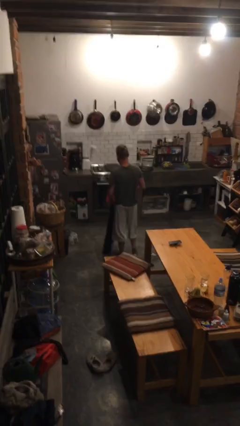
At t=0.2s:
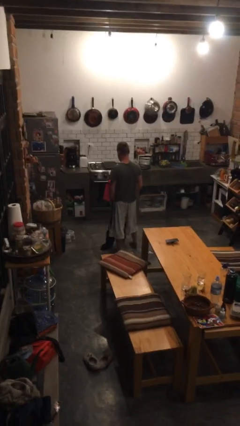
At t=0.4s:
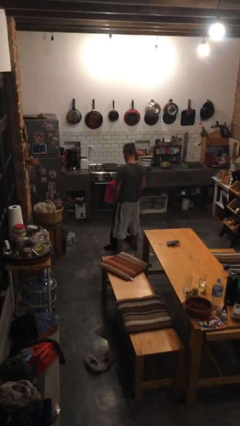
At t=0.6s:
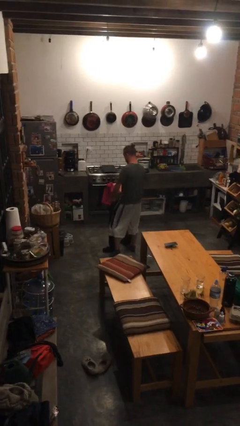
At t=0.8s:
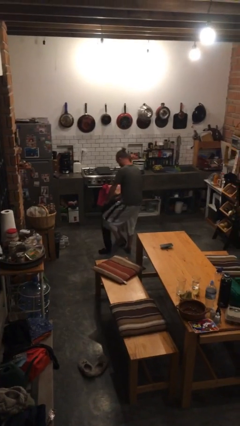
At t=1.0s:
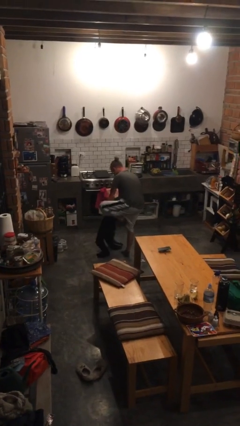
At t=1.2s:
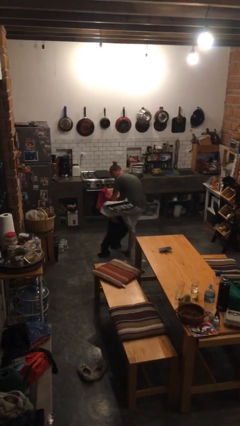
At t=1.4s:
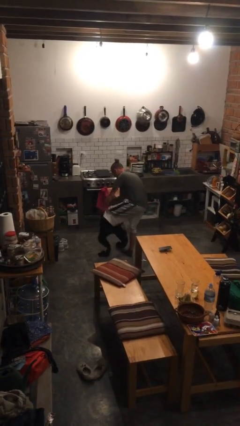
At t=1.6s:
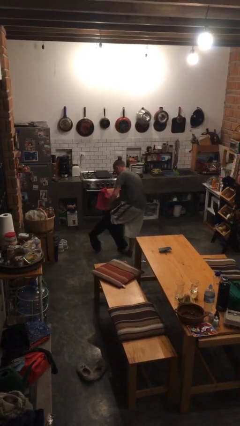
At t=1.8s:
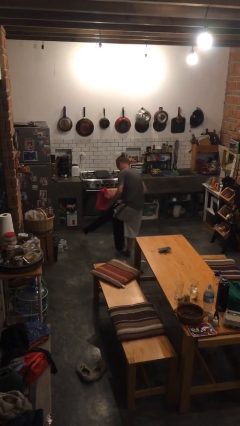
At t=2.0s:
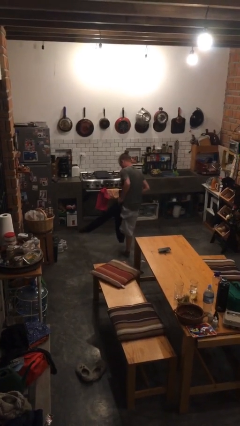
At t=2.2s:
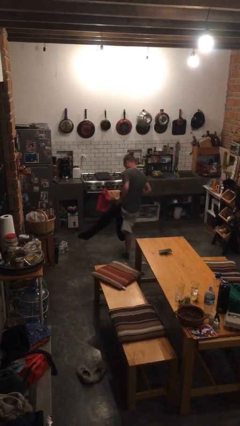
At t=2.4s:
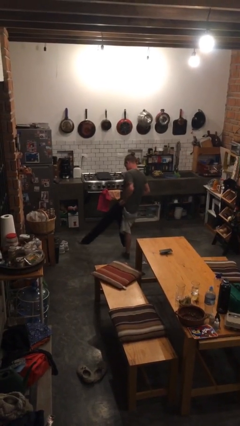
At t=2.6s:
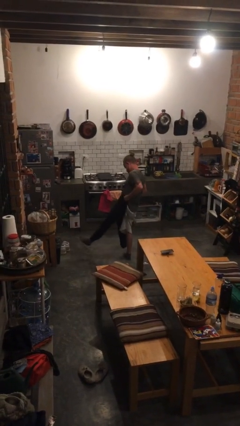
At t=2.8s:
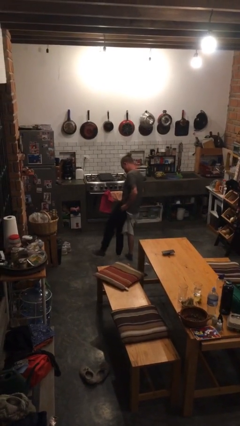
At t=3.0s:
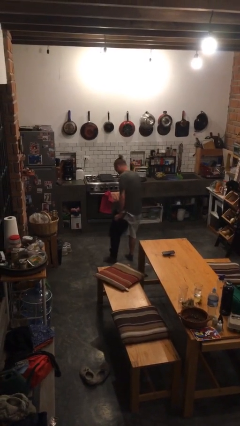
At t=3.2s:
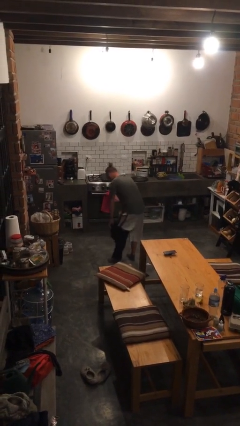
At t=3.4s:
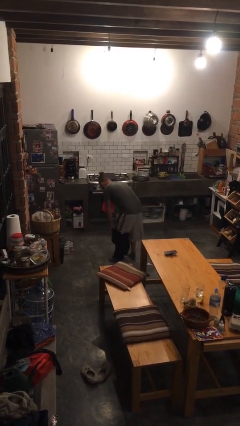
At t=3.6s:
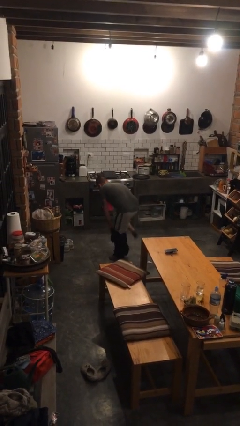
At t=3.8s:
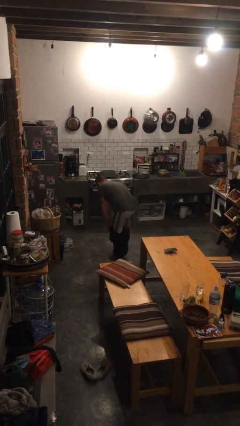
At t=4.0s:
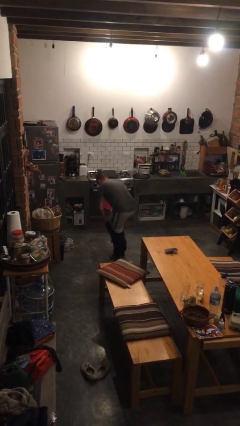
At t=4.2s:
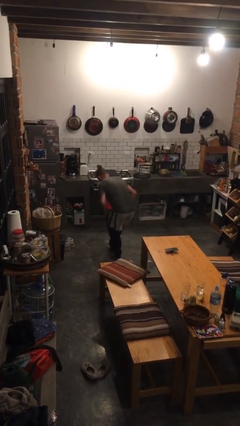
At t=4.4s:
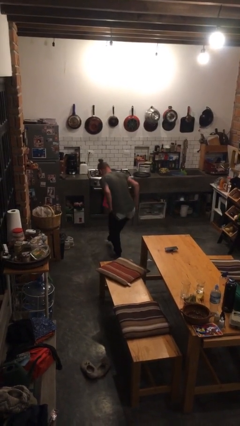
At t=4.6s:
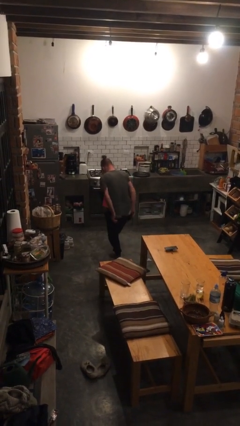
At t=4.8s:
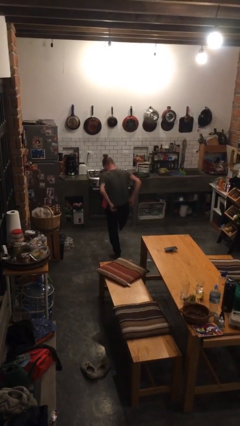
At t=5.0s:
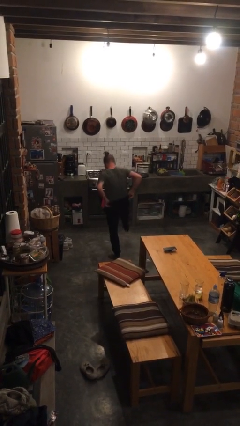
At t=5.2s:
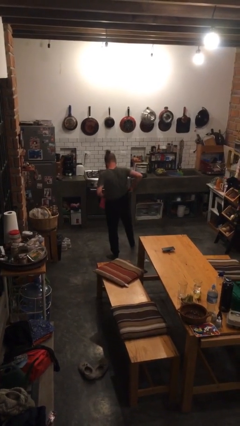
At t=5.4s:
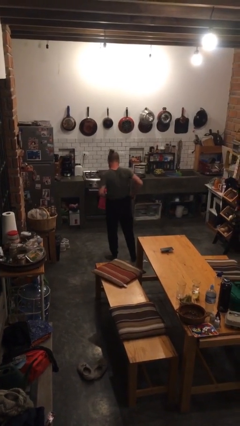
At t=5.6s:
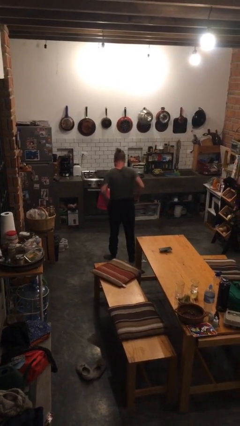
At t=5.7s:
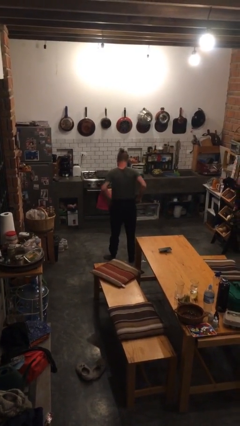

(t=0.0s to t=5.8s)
person puts on pants

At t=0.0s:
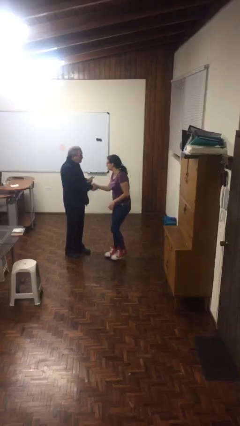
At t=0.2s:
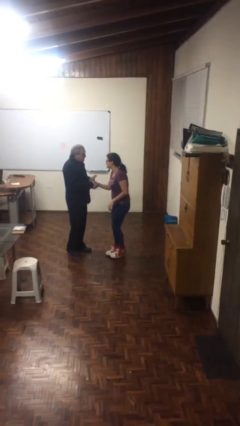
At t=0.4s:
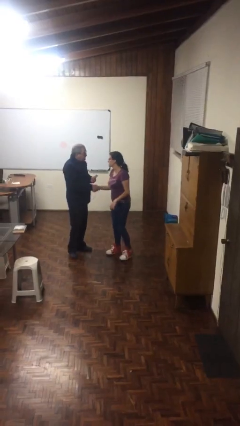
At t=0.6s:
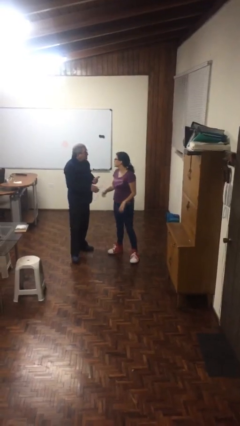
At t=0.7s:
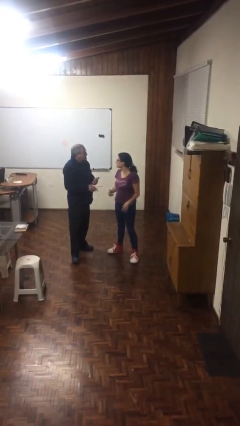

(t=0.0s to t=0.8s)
person shakes hand

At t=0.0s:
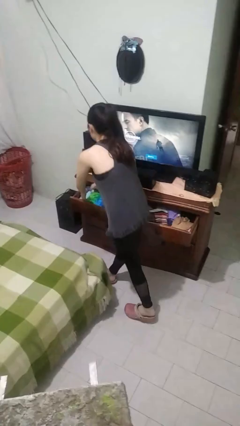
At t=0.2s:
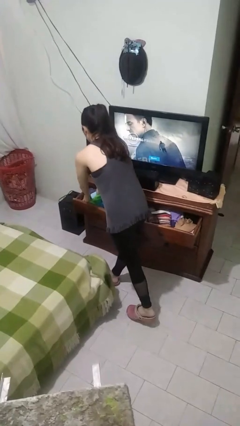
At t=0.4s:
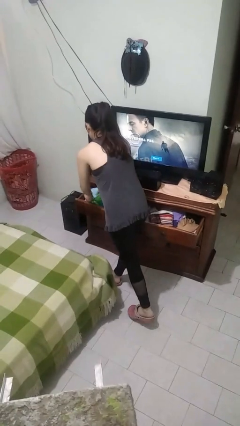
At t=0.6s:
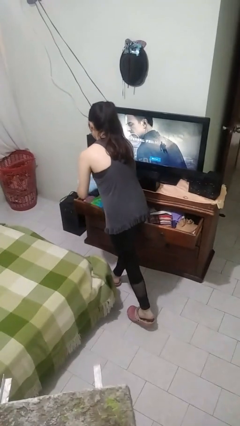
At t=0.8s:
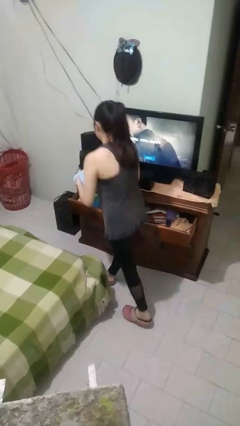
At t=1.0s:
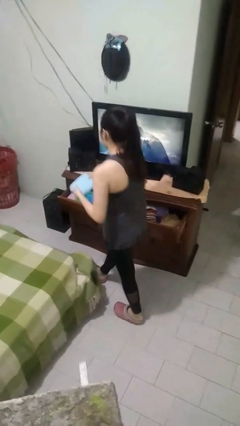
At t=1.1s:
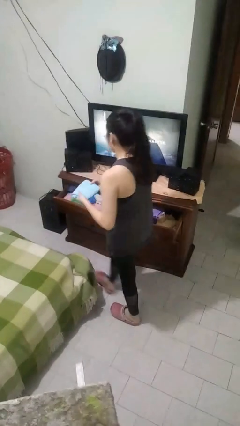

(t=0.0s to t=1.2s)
person takes clothes from dresser

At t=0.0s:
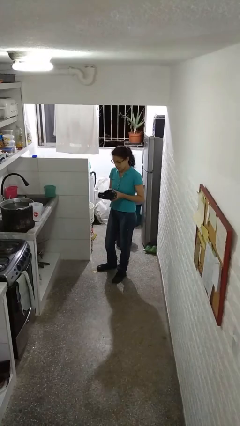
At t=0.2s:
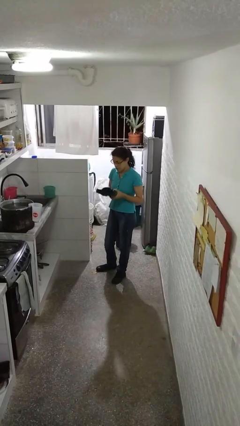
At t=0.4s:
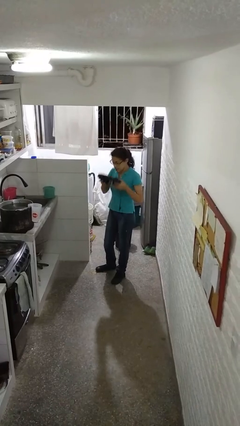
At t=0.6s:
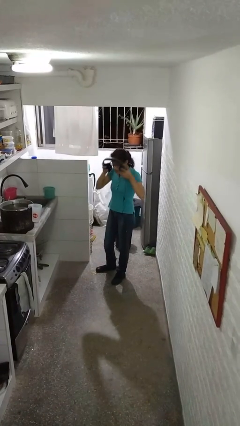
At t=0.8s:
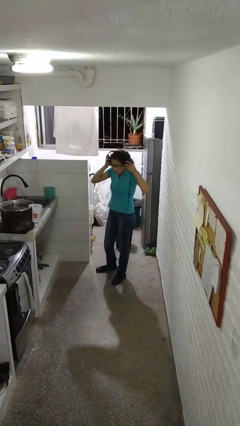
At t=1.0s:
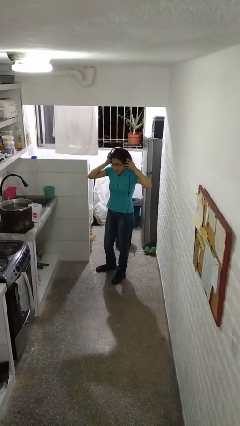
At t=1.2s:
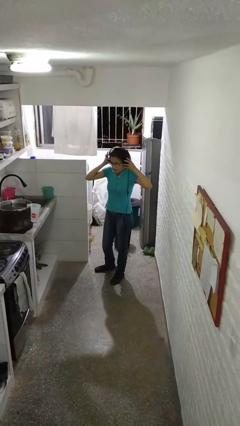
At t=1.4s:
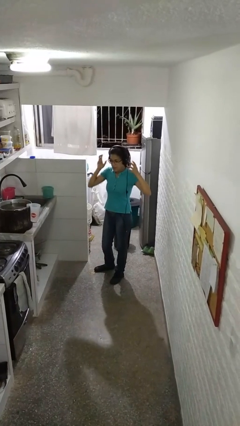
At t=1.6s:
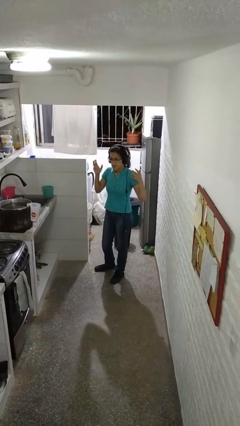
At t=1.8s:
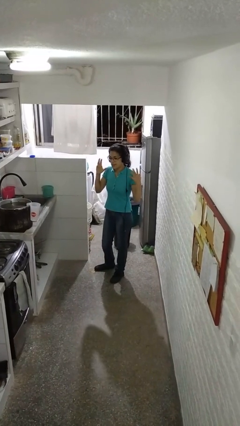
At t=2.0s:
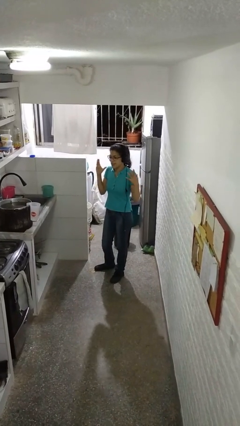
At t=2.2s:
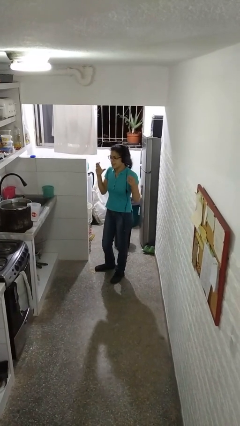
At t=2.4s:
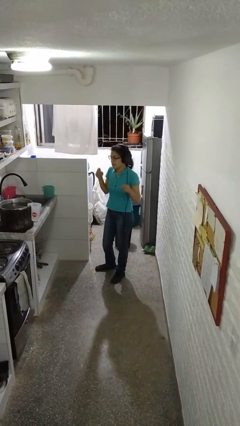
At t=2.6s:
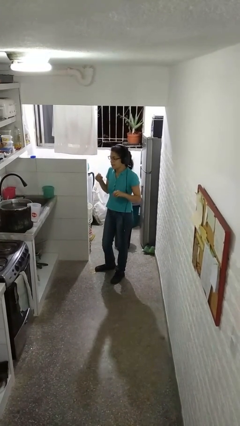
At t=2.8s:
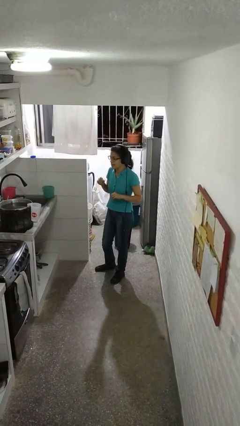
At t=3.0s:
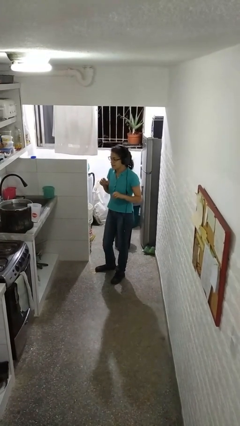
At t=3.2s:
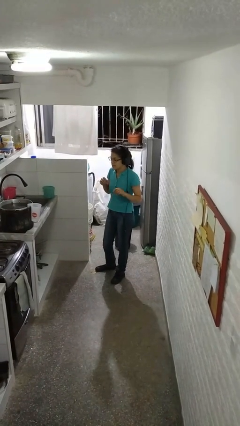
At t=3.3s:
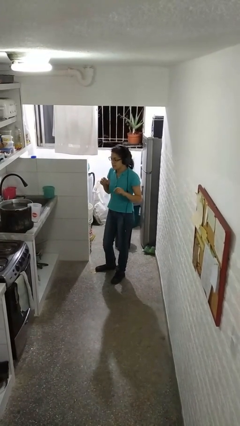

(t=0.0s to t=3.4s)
person puts on headphones

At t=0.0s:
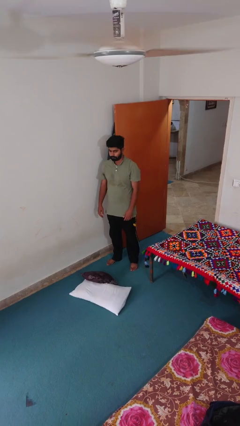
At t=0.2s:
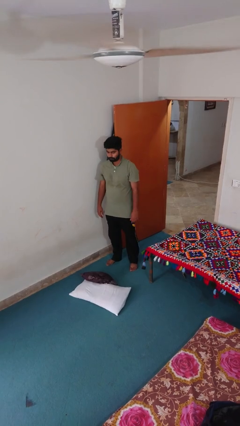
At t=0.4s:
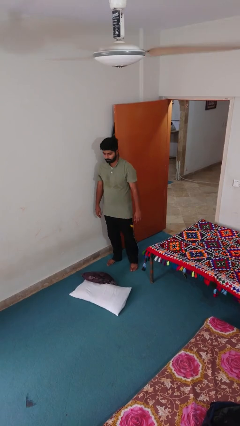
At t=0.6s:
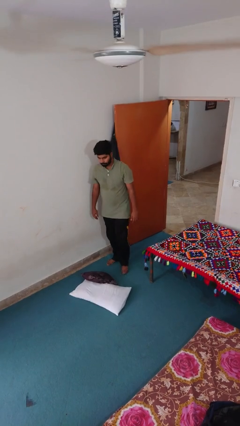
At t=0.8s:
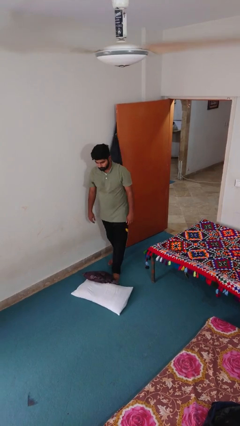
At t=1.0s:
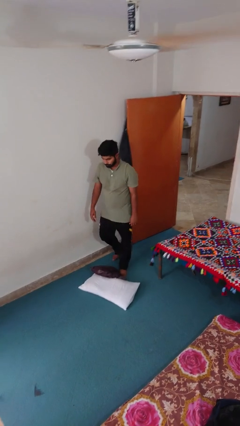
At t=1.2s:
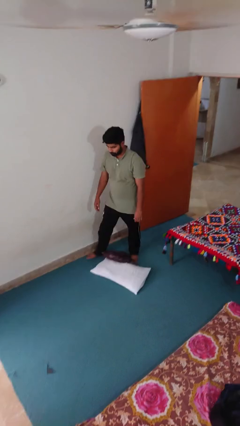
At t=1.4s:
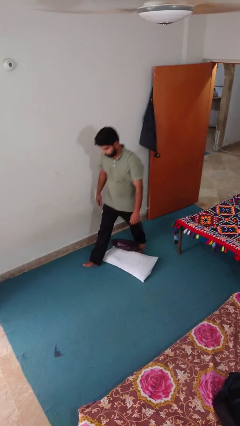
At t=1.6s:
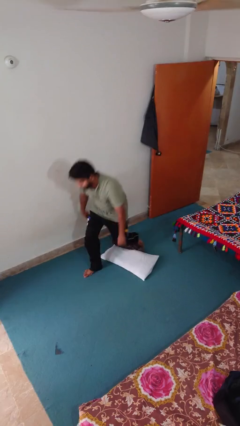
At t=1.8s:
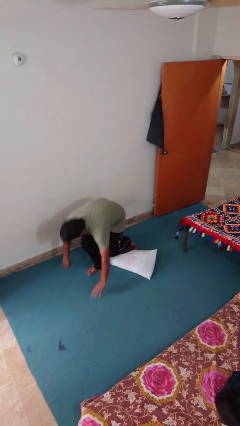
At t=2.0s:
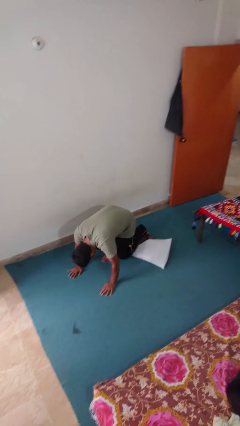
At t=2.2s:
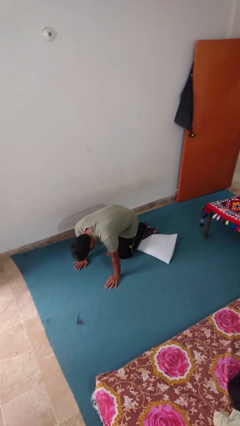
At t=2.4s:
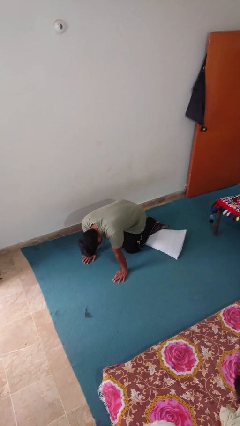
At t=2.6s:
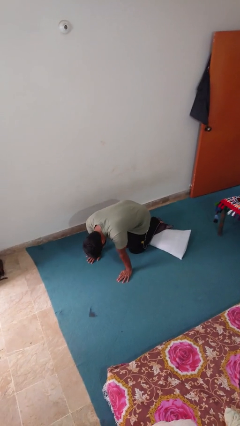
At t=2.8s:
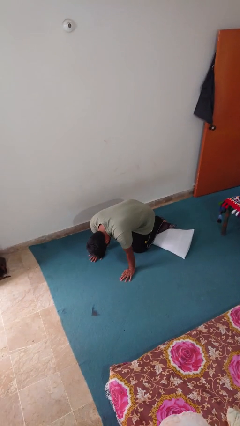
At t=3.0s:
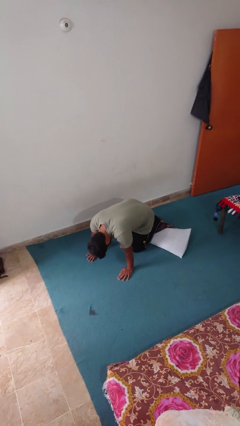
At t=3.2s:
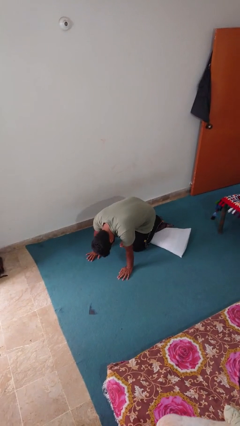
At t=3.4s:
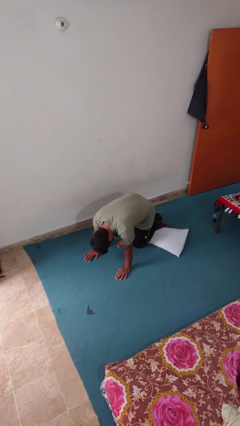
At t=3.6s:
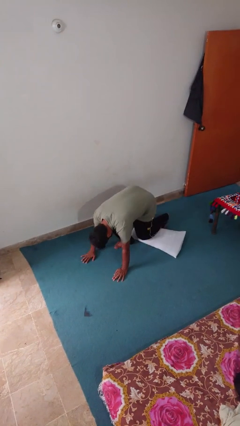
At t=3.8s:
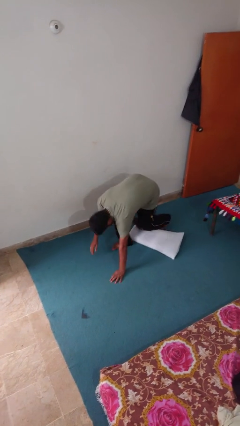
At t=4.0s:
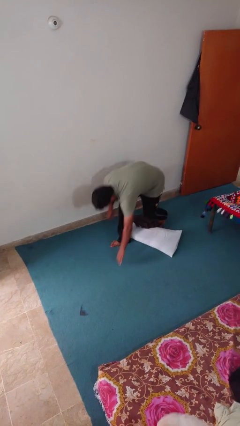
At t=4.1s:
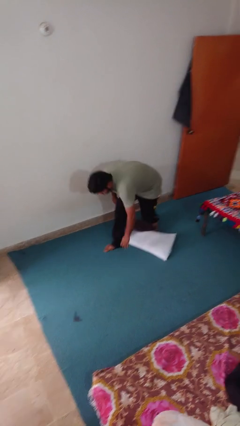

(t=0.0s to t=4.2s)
person trips on object on floor

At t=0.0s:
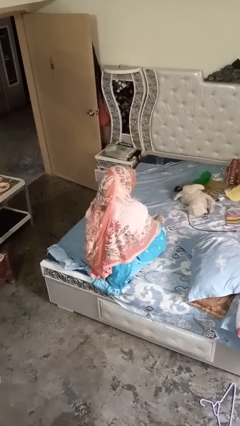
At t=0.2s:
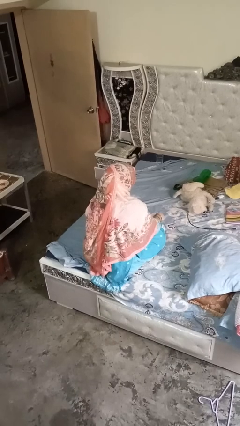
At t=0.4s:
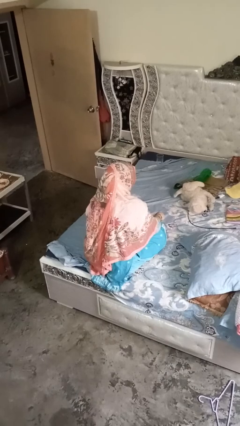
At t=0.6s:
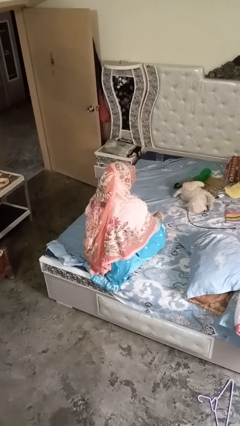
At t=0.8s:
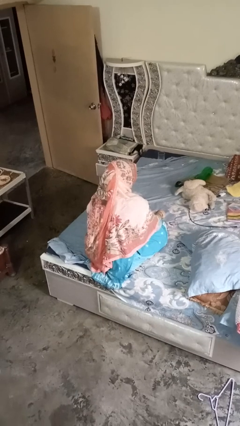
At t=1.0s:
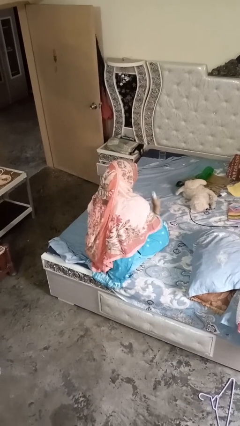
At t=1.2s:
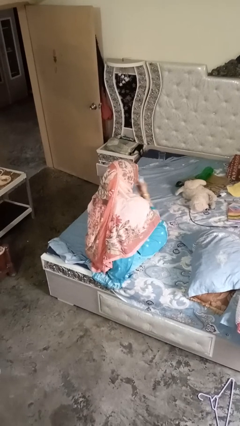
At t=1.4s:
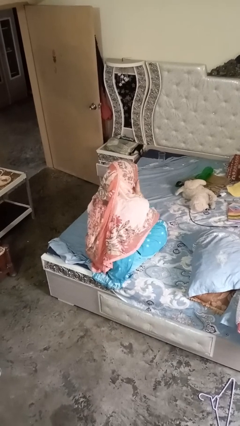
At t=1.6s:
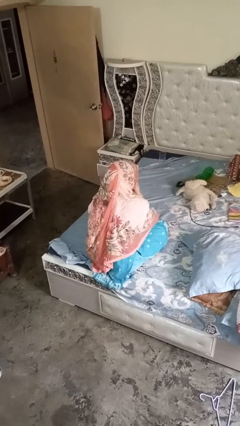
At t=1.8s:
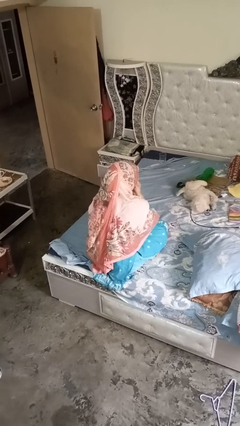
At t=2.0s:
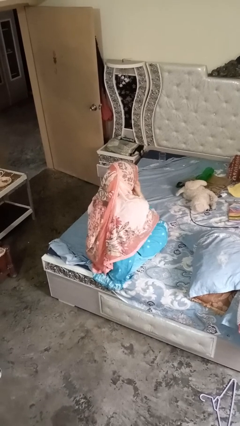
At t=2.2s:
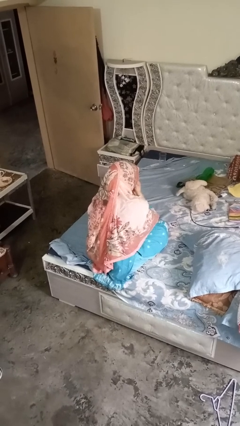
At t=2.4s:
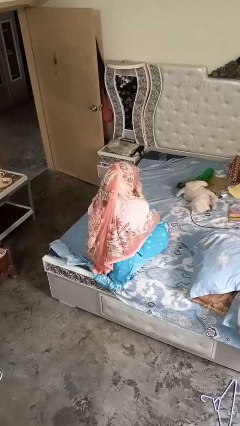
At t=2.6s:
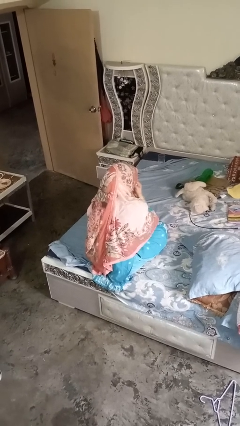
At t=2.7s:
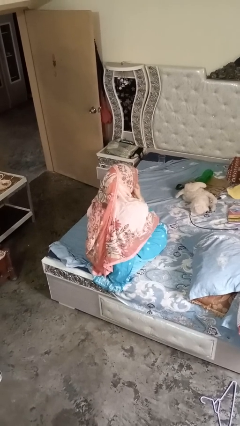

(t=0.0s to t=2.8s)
person blows nose
